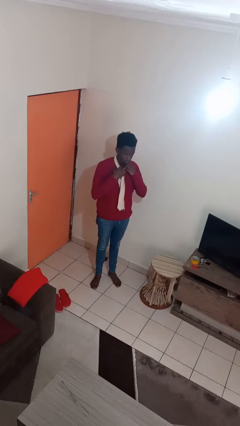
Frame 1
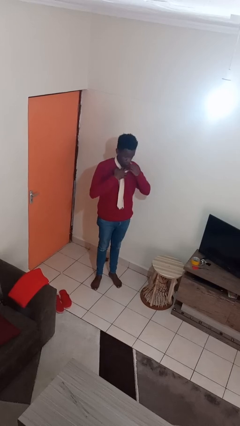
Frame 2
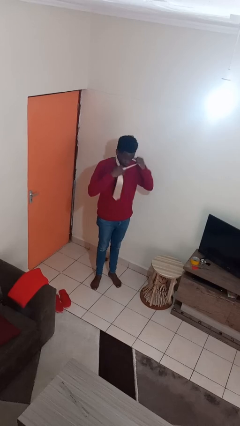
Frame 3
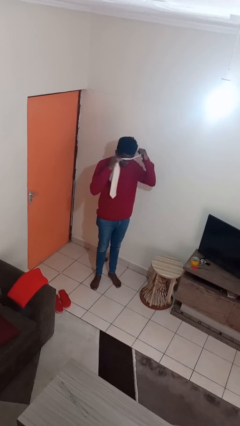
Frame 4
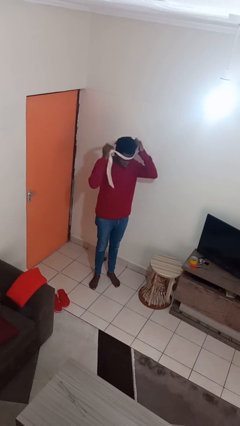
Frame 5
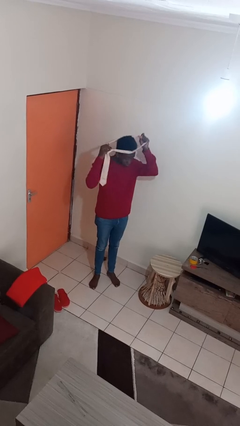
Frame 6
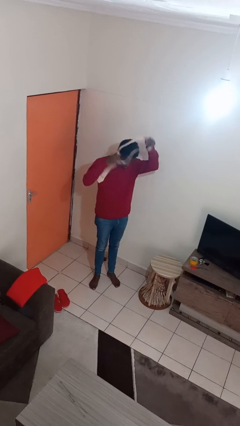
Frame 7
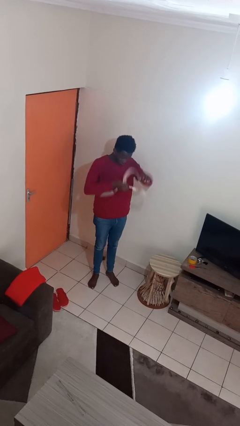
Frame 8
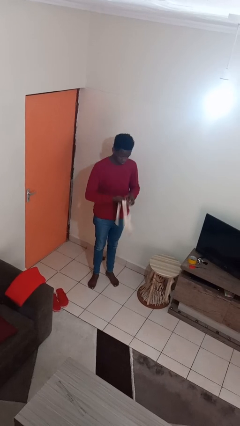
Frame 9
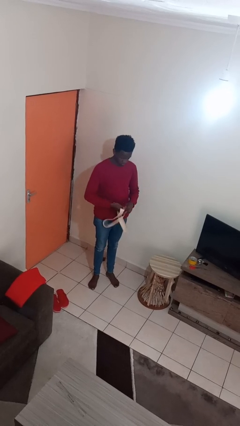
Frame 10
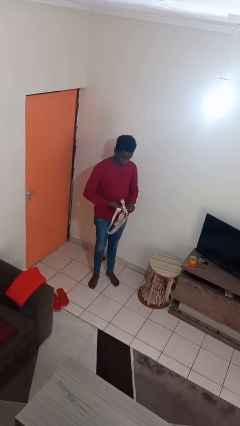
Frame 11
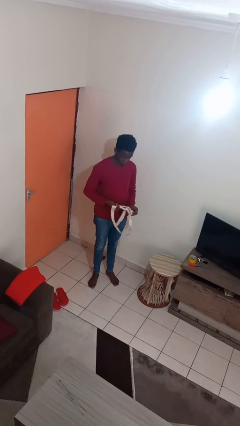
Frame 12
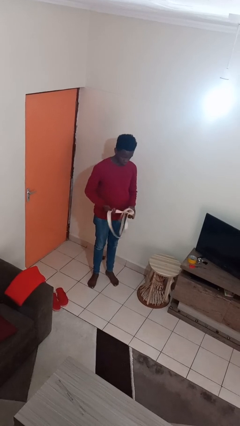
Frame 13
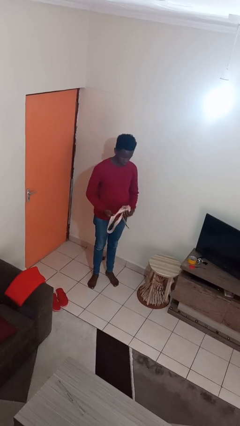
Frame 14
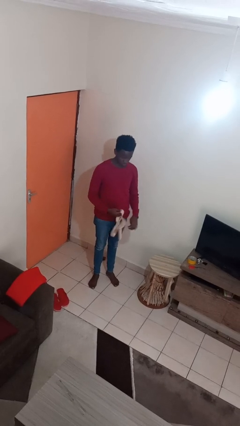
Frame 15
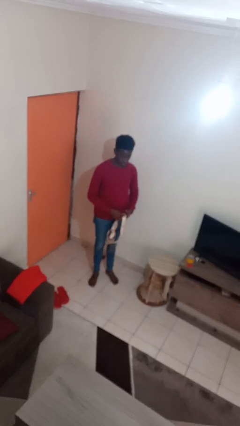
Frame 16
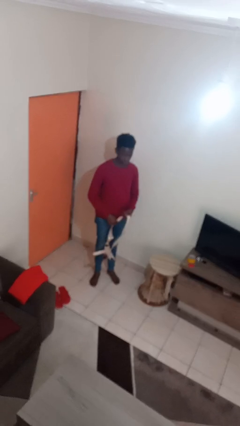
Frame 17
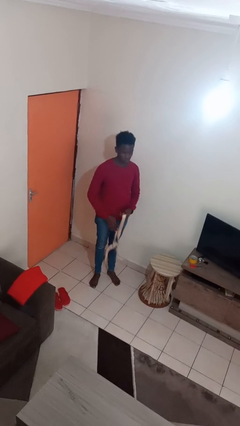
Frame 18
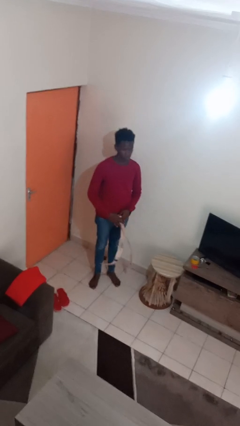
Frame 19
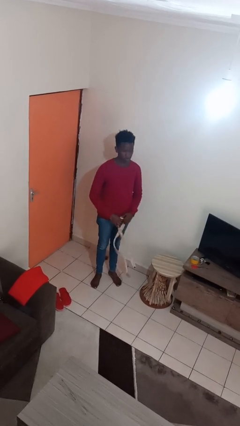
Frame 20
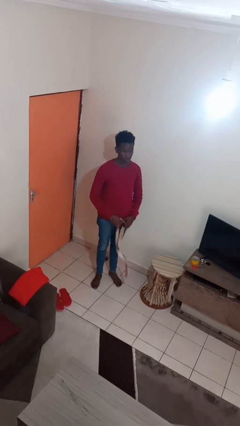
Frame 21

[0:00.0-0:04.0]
person takes off necktie

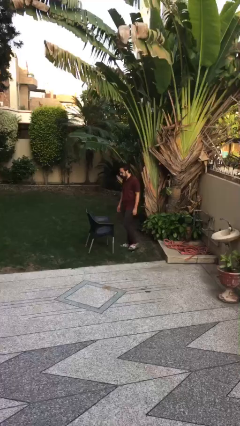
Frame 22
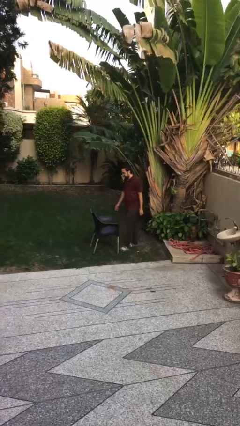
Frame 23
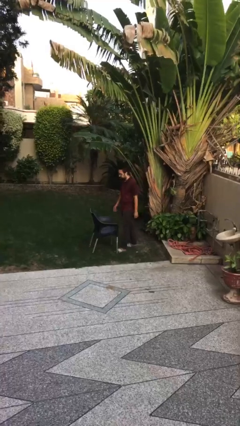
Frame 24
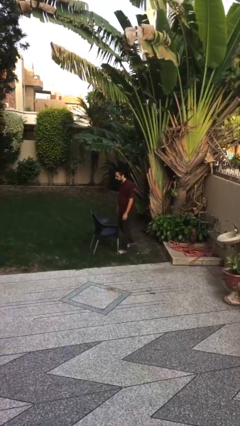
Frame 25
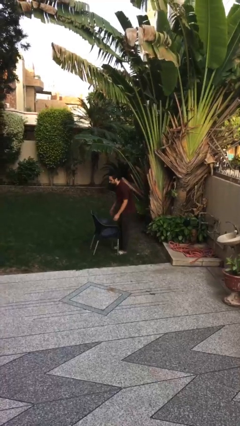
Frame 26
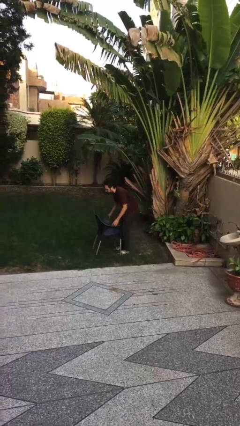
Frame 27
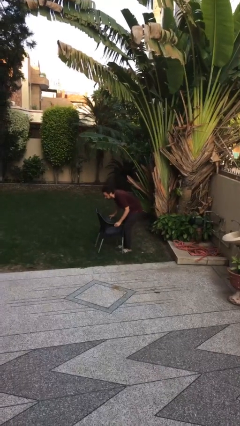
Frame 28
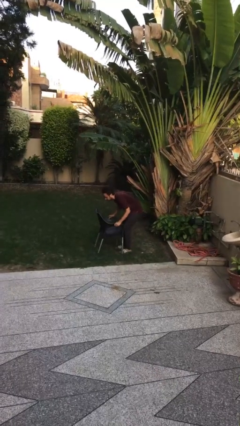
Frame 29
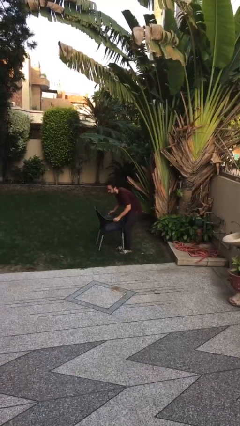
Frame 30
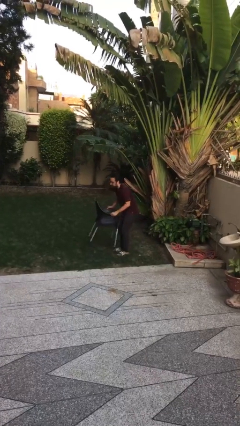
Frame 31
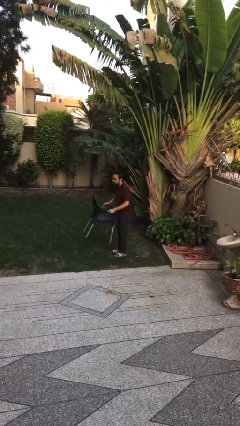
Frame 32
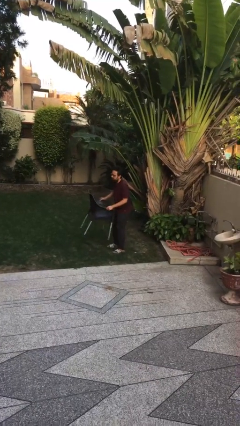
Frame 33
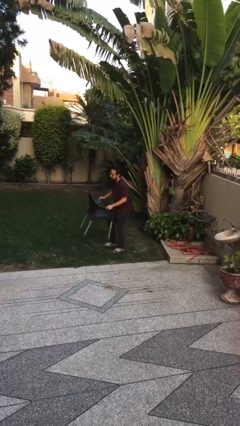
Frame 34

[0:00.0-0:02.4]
person picks up object from floor

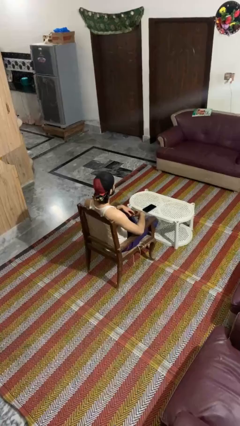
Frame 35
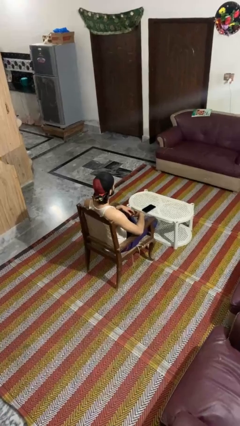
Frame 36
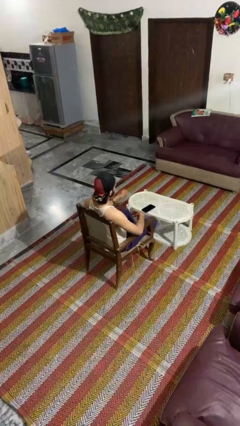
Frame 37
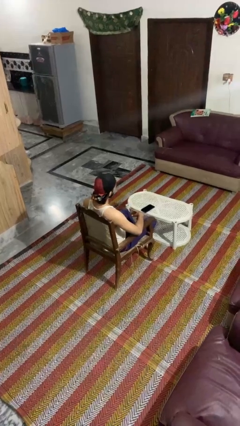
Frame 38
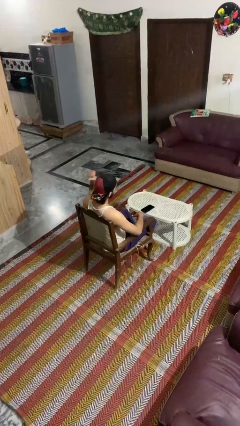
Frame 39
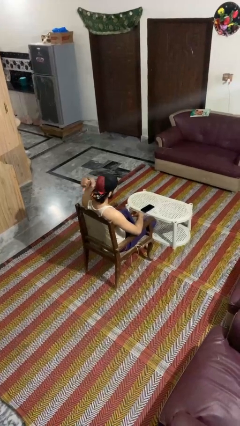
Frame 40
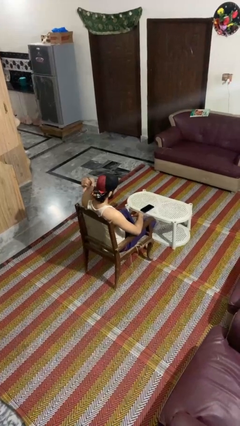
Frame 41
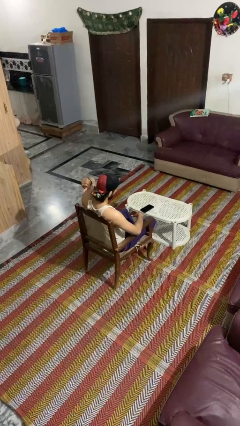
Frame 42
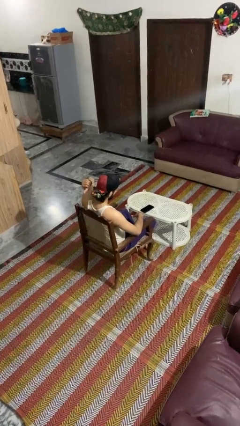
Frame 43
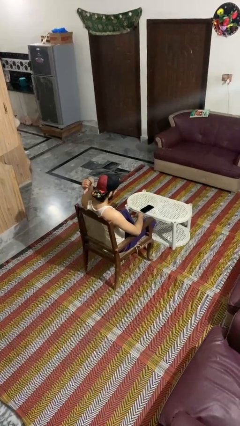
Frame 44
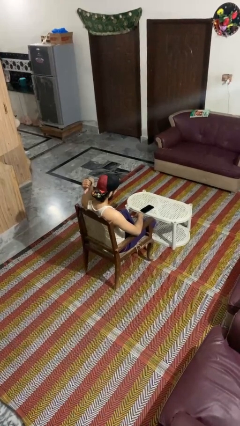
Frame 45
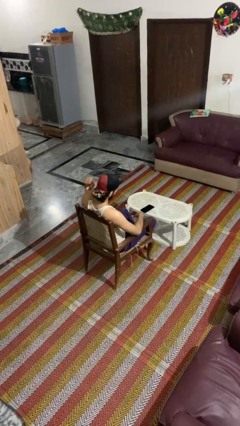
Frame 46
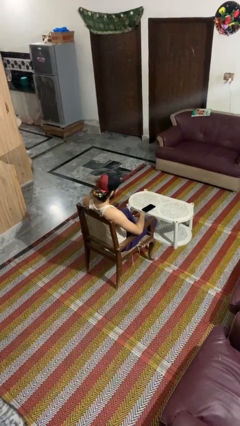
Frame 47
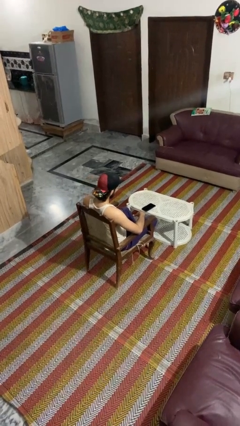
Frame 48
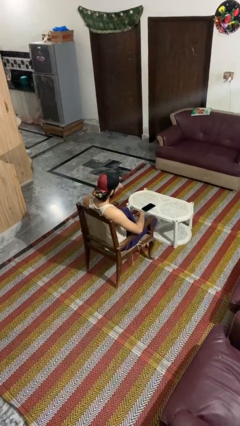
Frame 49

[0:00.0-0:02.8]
person gestures behind me

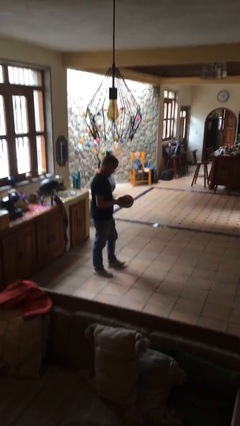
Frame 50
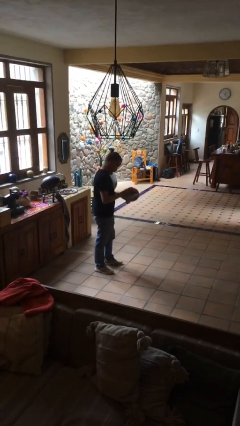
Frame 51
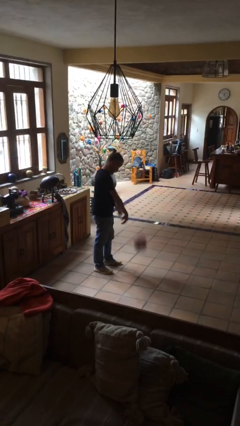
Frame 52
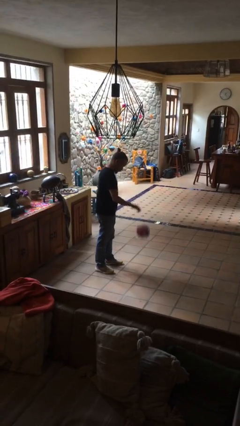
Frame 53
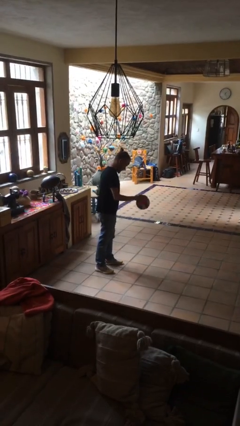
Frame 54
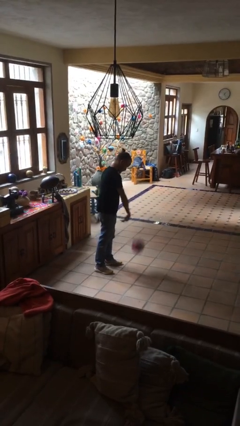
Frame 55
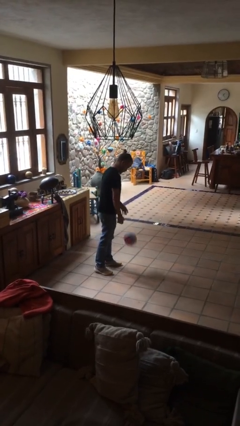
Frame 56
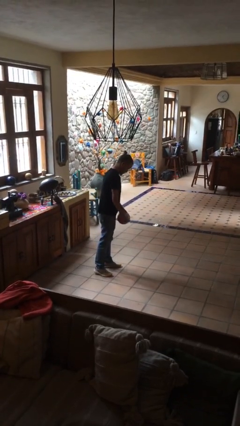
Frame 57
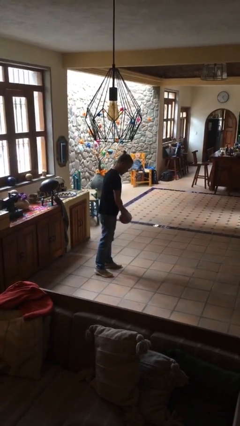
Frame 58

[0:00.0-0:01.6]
person bounces ball on floor

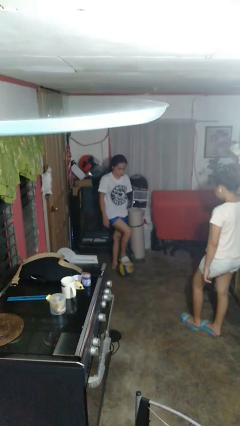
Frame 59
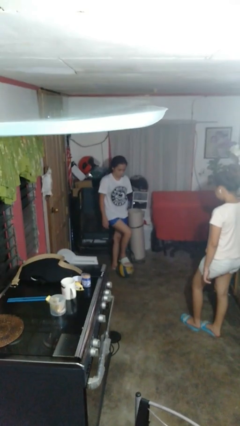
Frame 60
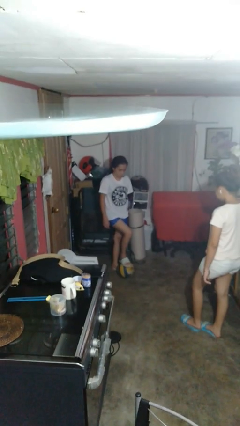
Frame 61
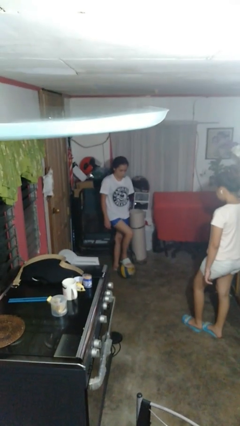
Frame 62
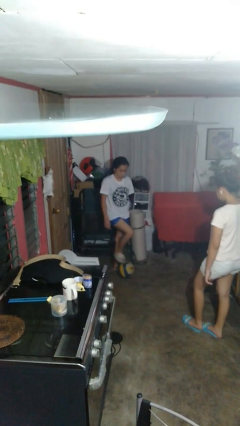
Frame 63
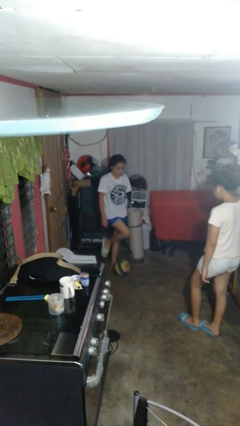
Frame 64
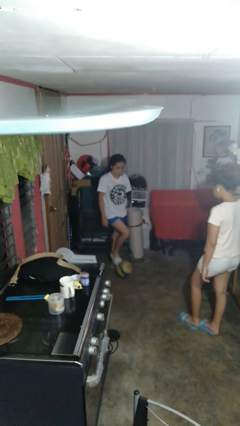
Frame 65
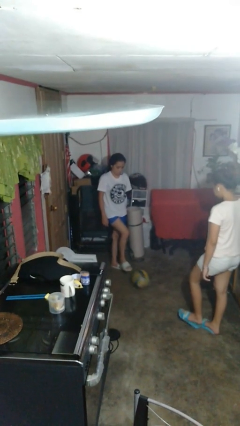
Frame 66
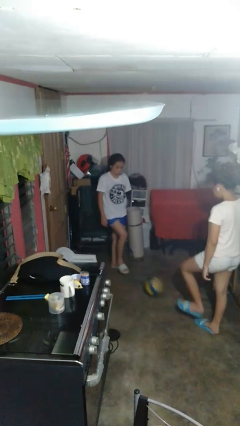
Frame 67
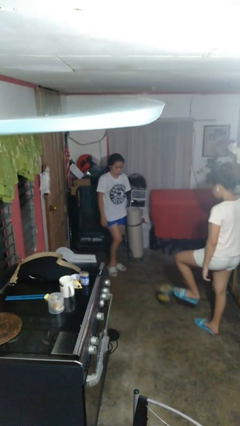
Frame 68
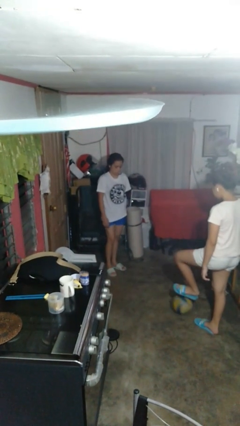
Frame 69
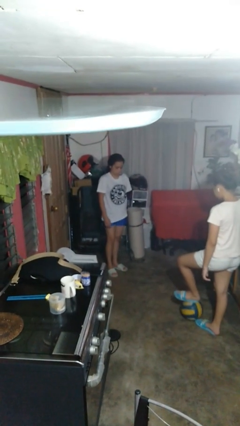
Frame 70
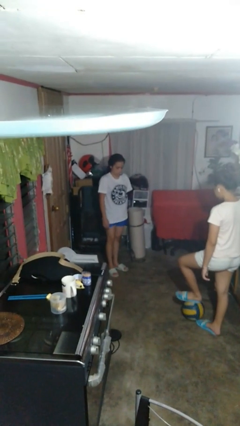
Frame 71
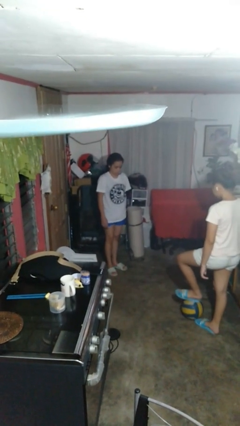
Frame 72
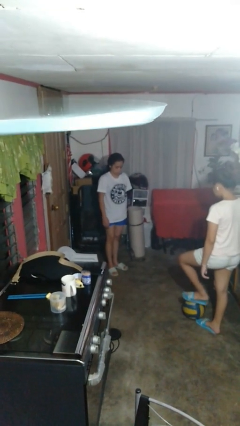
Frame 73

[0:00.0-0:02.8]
person kicks object to person

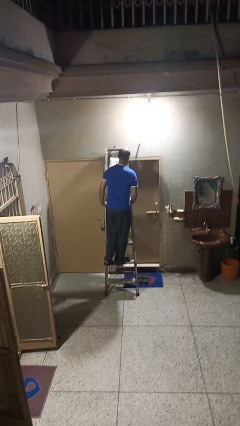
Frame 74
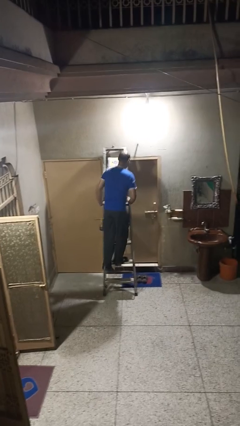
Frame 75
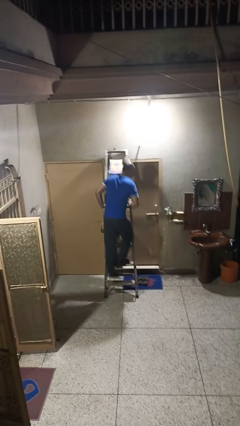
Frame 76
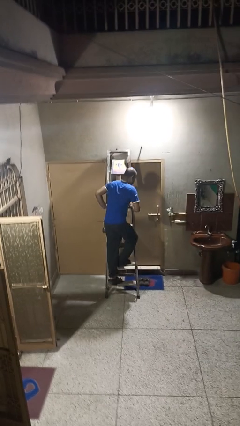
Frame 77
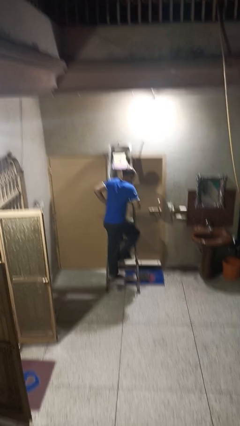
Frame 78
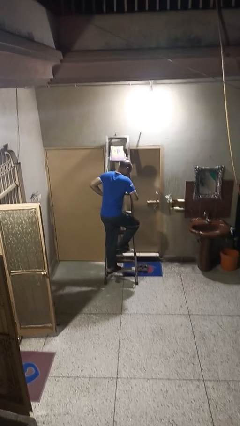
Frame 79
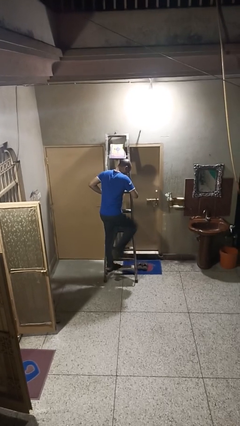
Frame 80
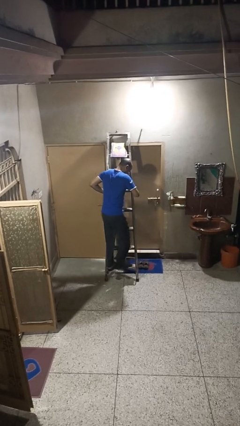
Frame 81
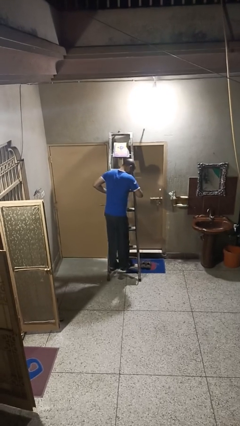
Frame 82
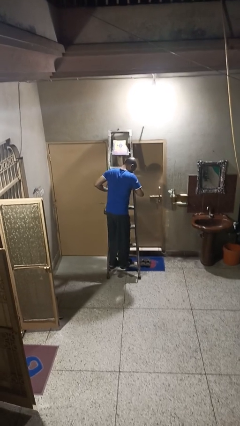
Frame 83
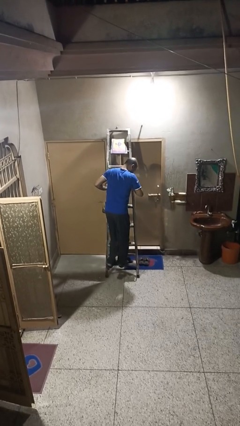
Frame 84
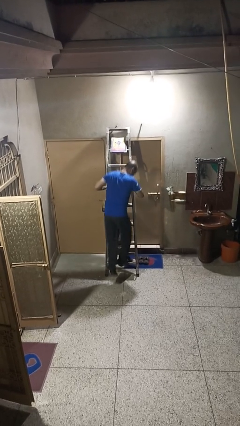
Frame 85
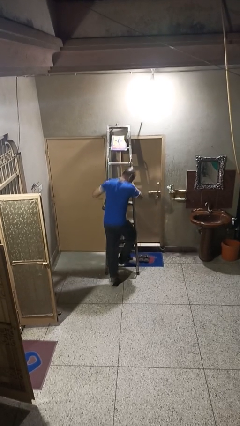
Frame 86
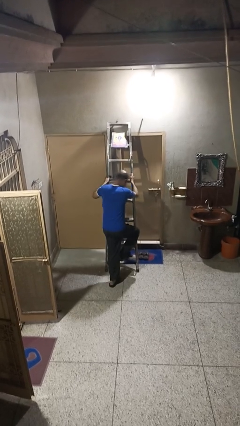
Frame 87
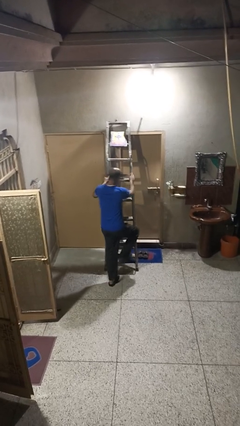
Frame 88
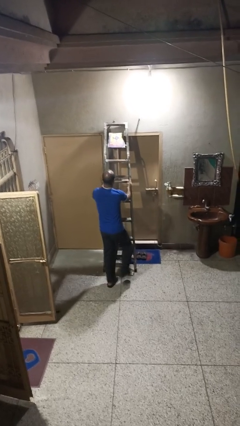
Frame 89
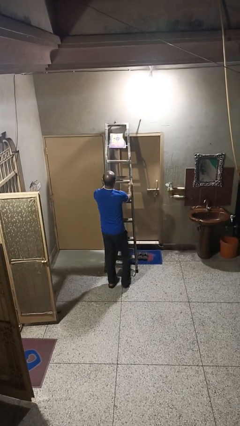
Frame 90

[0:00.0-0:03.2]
person climbs down ladder

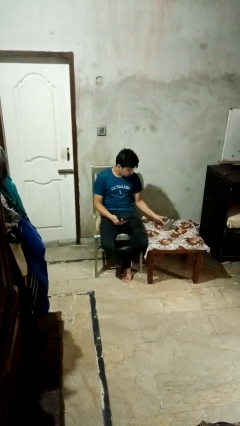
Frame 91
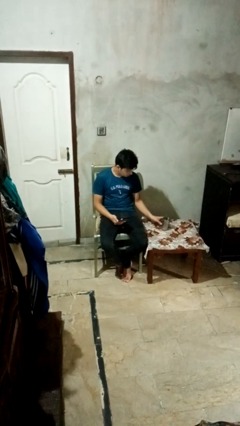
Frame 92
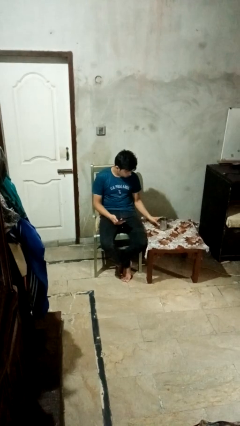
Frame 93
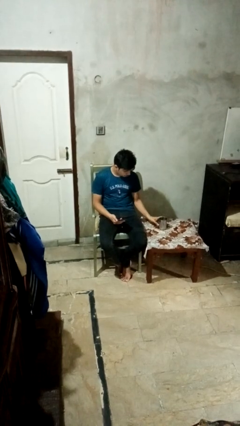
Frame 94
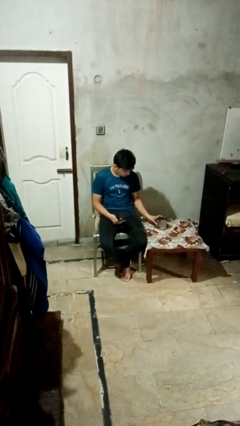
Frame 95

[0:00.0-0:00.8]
person sets upright glass
